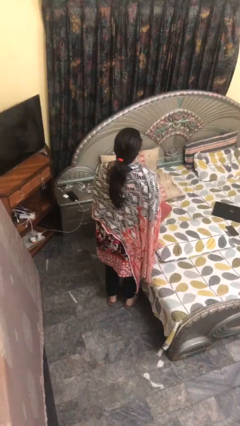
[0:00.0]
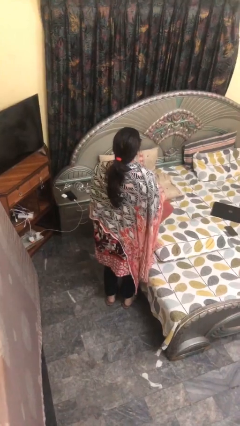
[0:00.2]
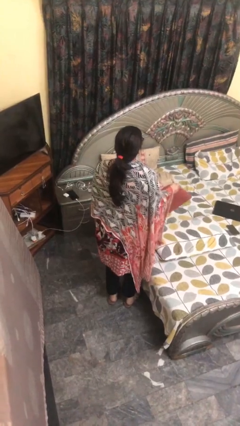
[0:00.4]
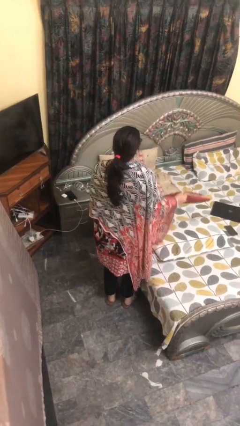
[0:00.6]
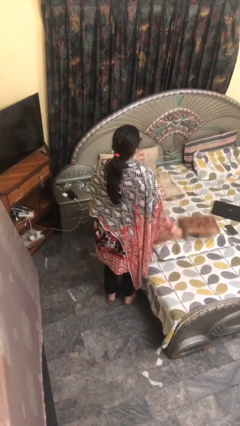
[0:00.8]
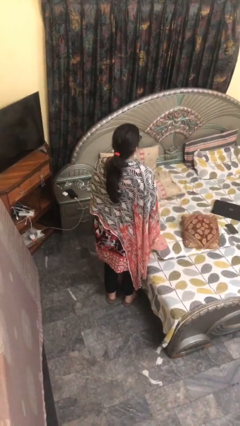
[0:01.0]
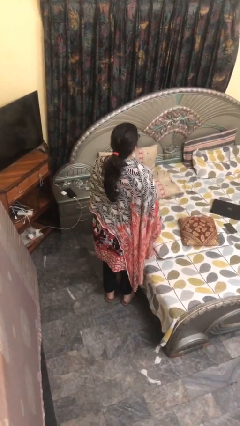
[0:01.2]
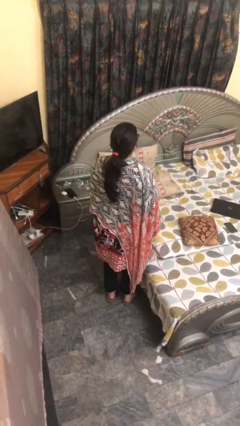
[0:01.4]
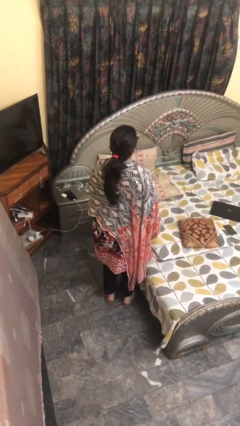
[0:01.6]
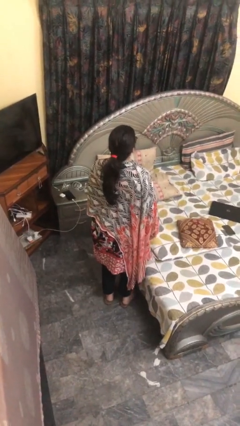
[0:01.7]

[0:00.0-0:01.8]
person throws object on bed

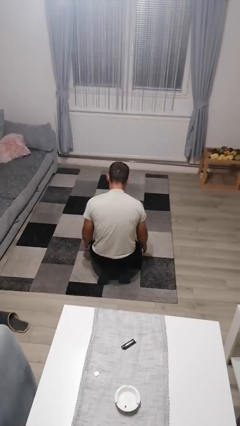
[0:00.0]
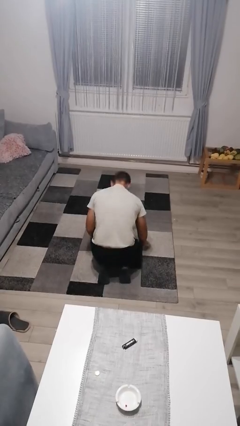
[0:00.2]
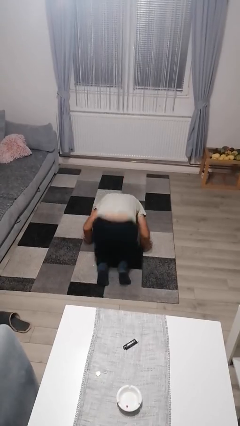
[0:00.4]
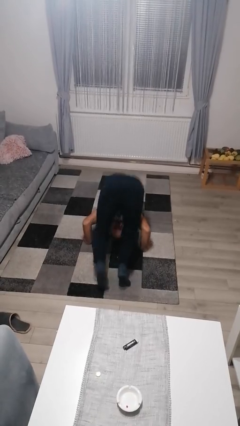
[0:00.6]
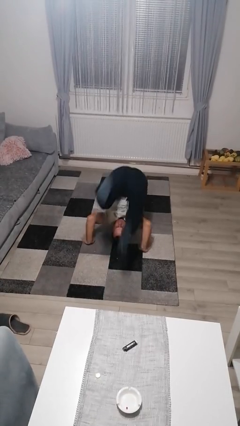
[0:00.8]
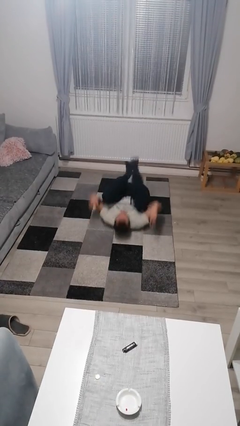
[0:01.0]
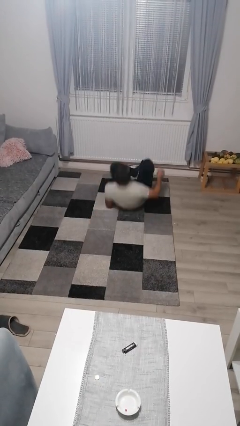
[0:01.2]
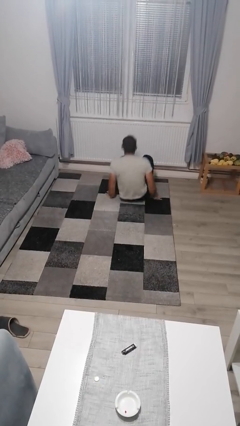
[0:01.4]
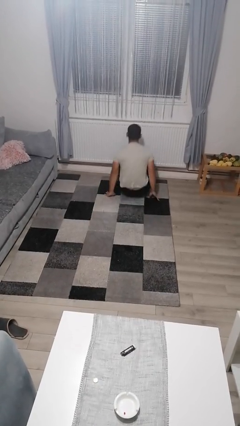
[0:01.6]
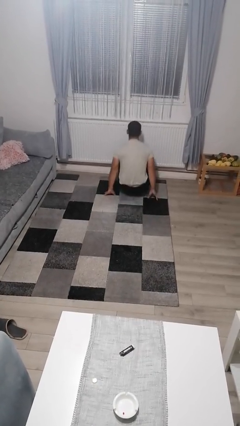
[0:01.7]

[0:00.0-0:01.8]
person somersaults

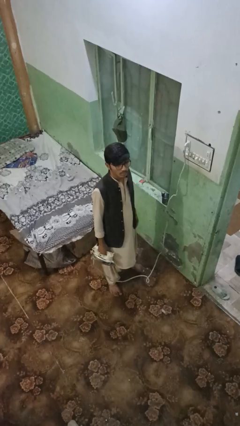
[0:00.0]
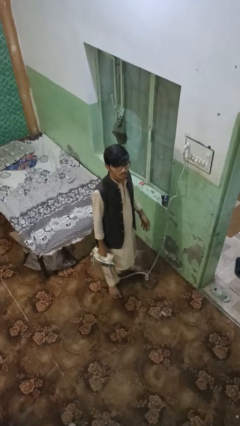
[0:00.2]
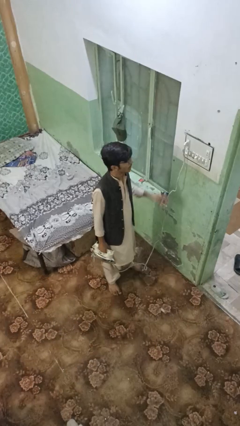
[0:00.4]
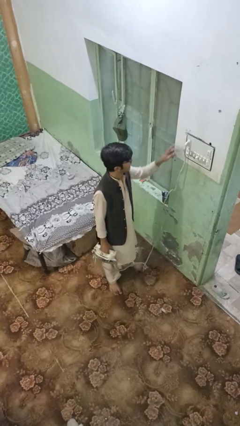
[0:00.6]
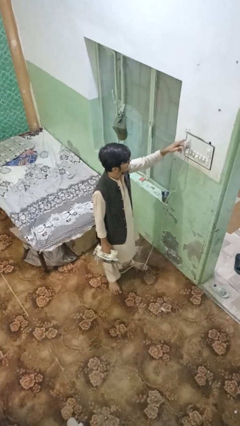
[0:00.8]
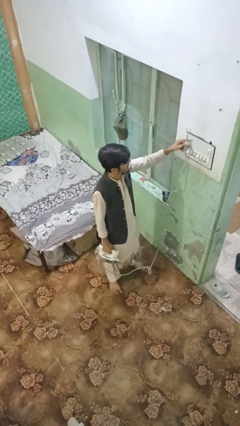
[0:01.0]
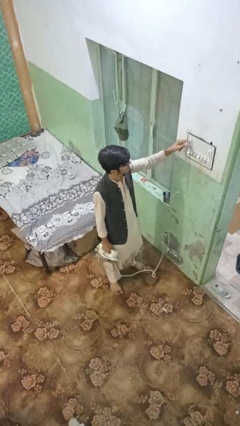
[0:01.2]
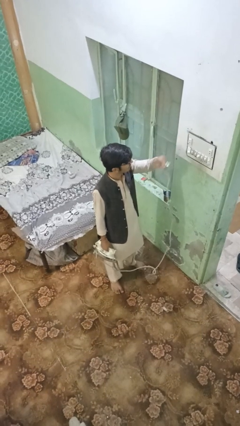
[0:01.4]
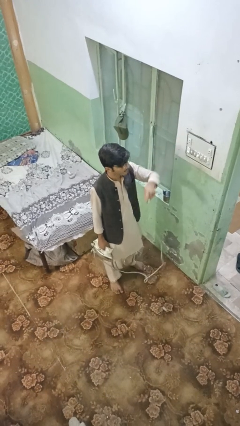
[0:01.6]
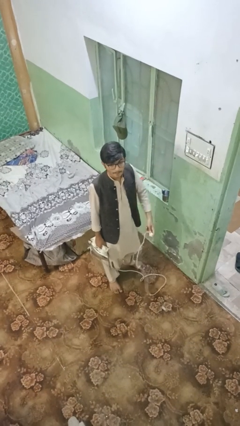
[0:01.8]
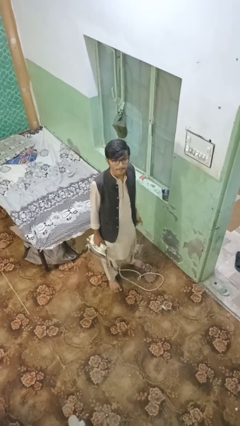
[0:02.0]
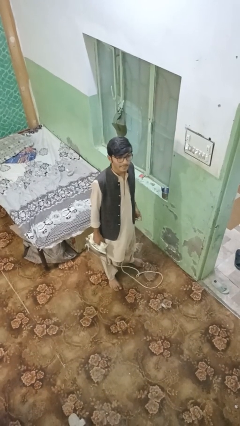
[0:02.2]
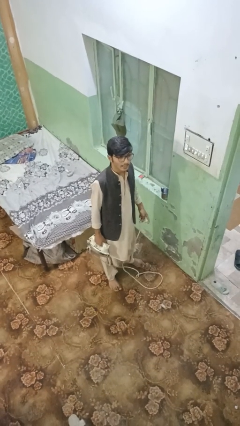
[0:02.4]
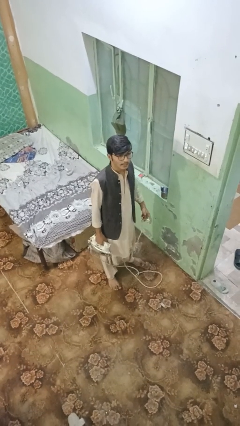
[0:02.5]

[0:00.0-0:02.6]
person unplugs from electrical socket

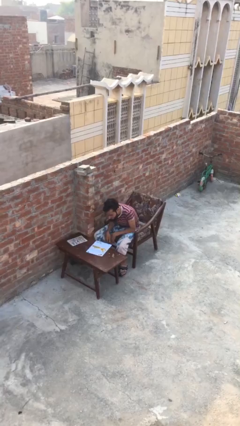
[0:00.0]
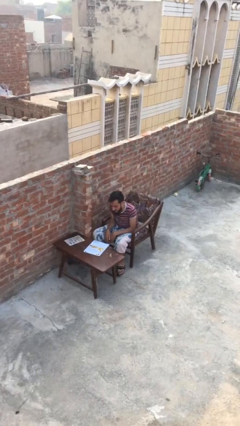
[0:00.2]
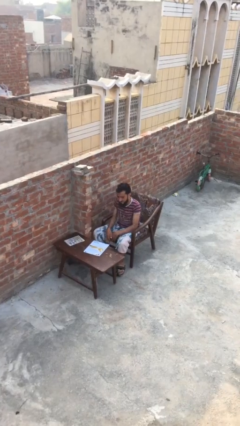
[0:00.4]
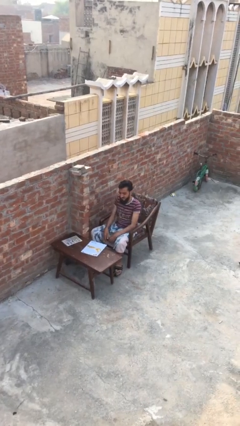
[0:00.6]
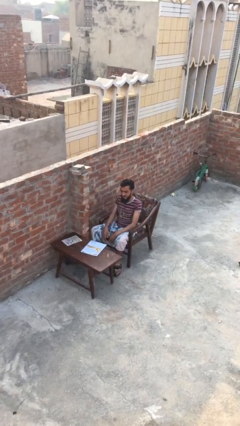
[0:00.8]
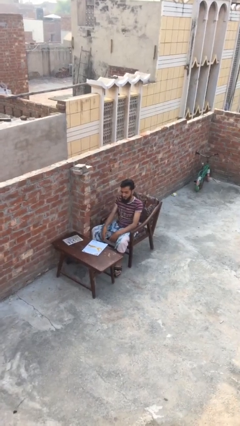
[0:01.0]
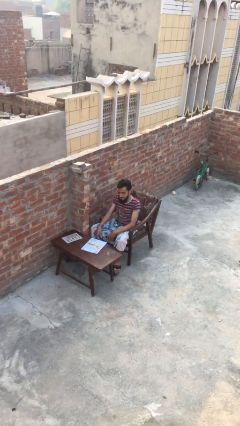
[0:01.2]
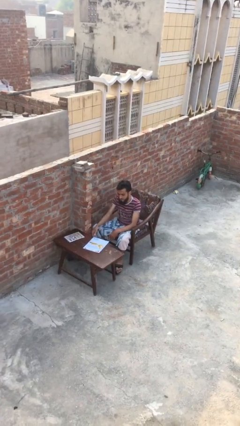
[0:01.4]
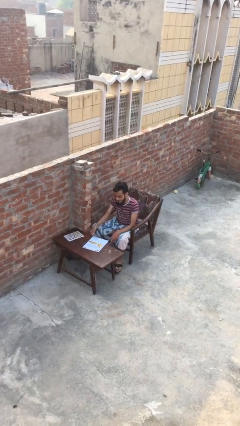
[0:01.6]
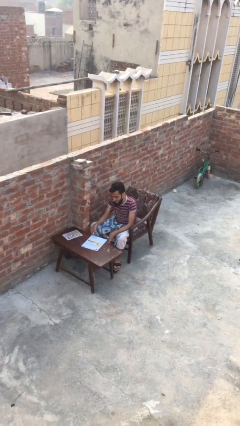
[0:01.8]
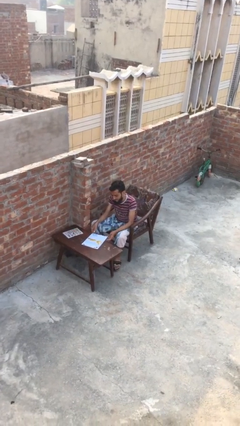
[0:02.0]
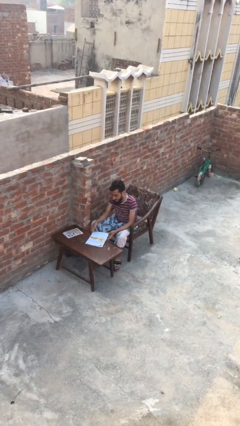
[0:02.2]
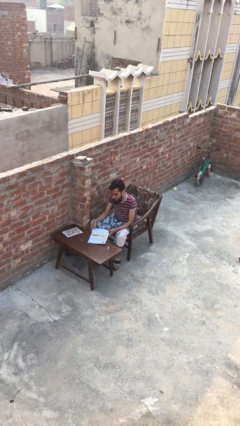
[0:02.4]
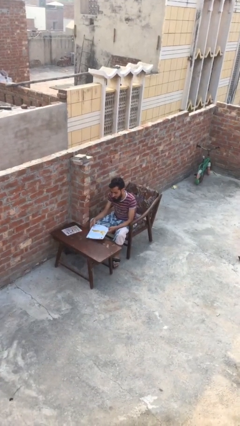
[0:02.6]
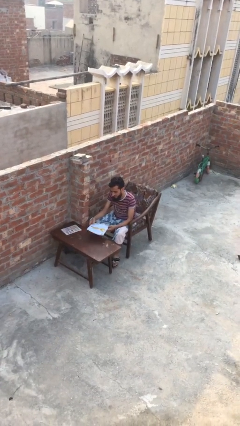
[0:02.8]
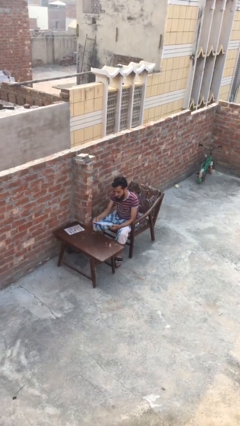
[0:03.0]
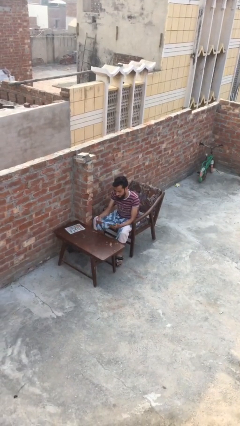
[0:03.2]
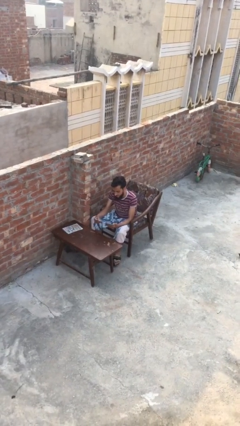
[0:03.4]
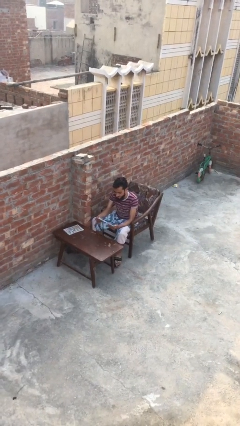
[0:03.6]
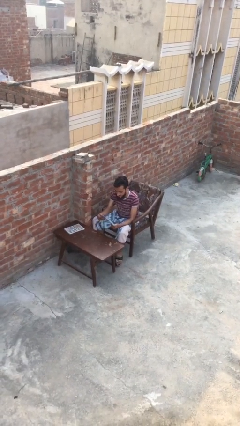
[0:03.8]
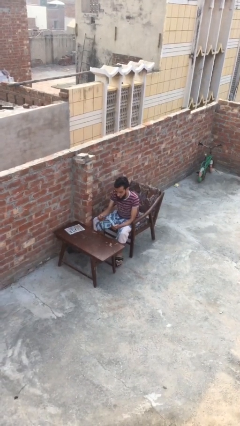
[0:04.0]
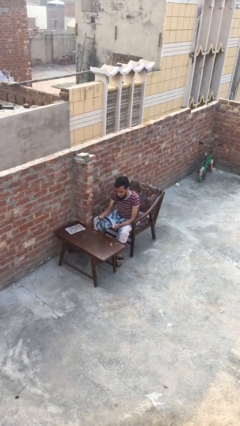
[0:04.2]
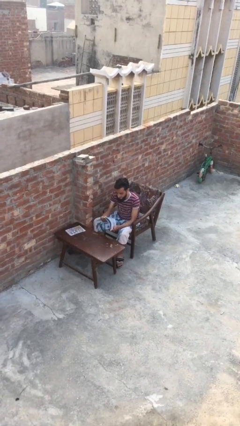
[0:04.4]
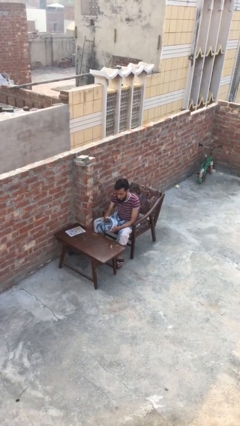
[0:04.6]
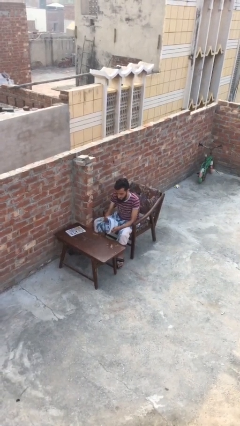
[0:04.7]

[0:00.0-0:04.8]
person reads document

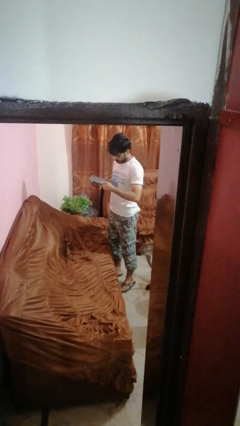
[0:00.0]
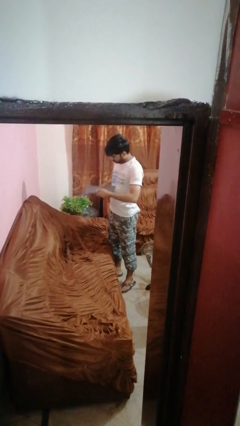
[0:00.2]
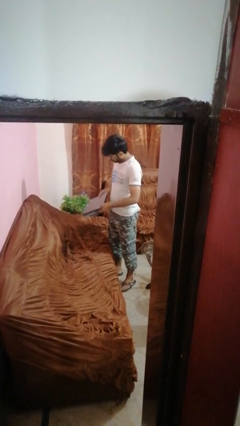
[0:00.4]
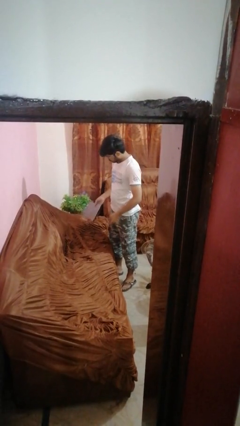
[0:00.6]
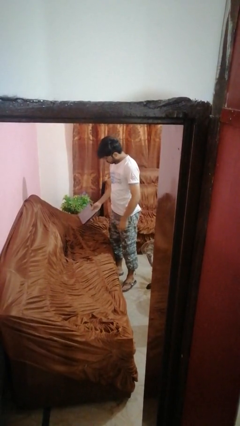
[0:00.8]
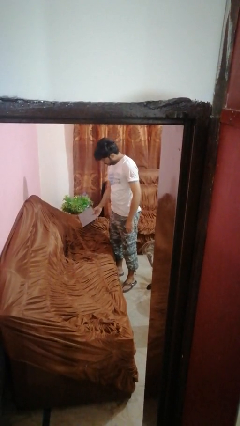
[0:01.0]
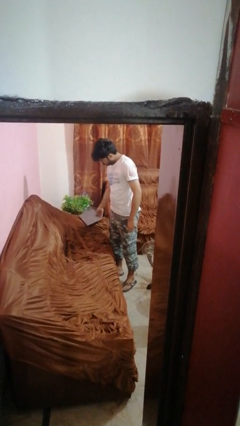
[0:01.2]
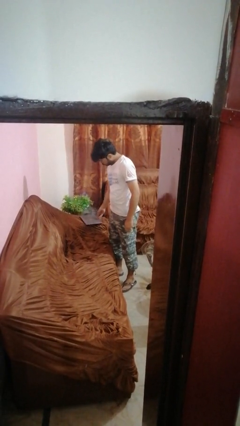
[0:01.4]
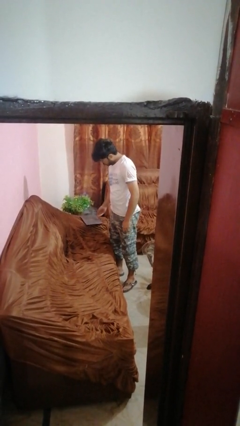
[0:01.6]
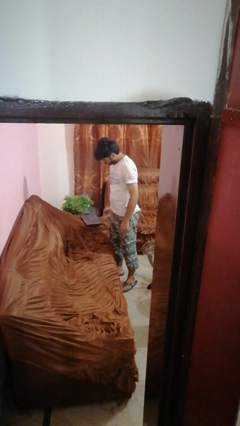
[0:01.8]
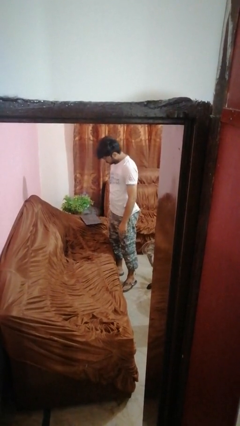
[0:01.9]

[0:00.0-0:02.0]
person puts down object on couch

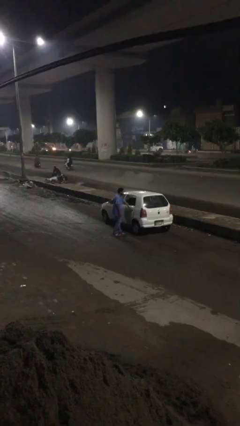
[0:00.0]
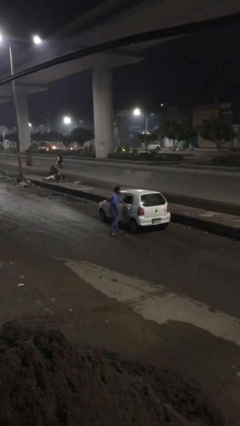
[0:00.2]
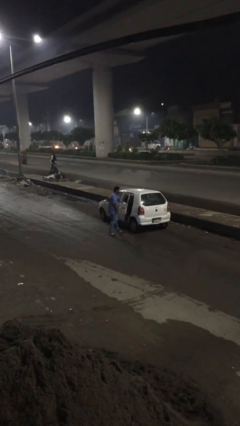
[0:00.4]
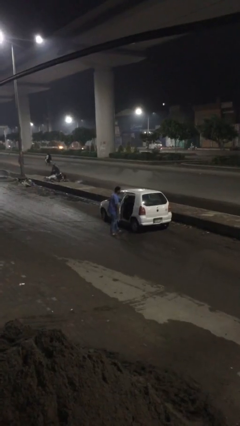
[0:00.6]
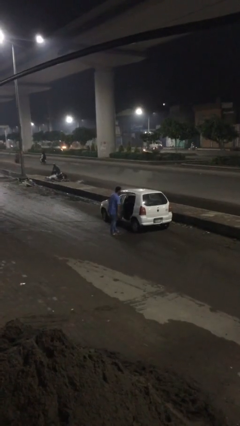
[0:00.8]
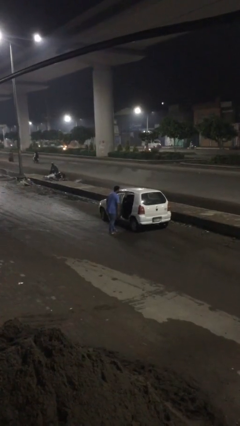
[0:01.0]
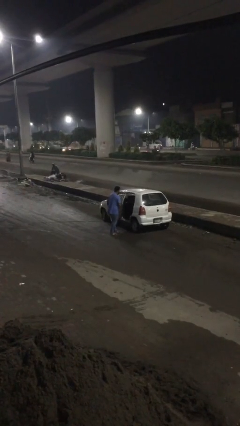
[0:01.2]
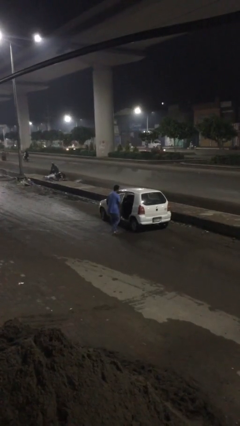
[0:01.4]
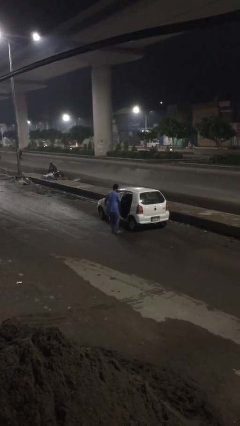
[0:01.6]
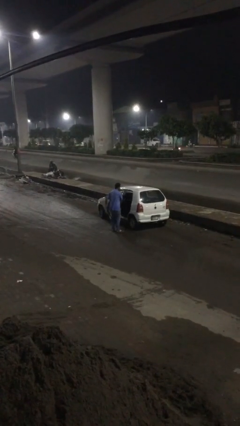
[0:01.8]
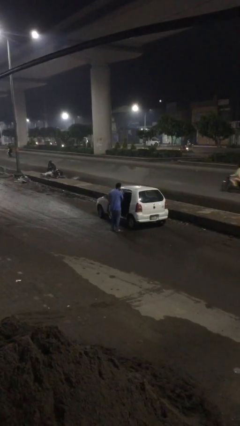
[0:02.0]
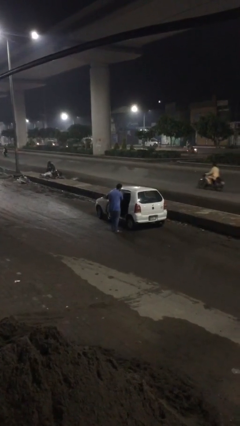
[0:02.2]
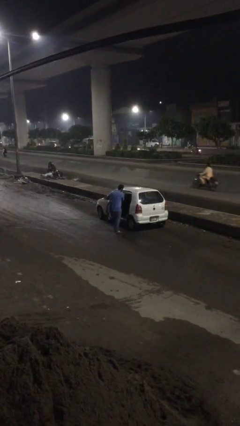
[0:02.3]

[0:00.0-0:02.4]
person opens car door

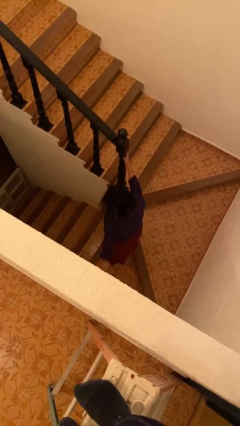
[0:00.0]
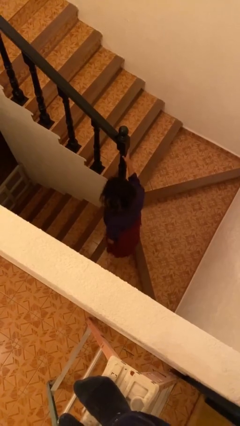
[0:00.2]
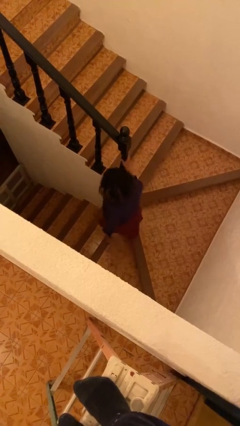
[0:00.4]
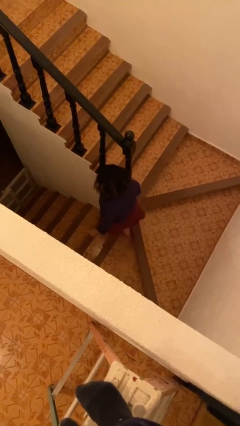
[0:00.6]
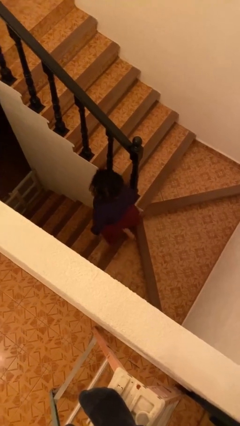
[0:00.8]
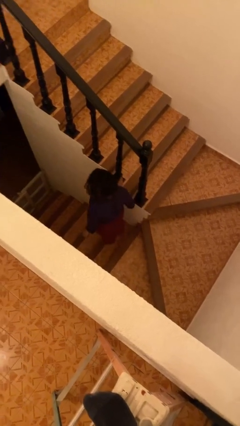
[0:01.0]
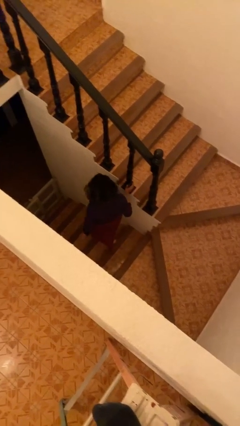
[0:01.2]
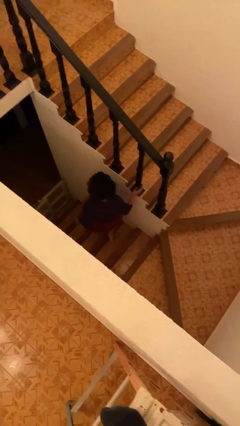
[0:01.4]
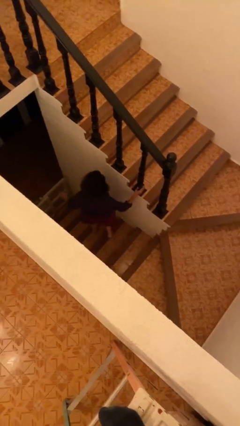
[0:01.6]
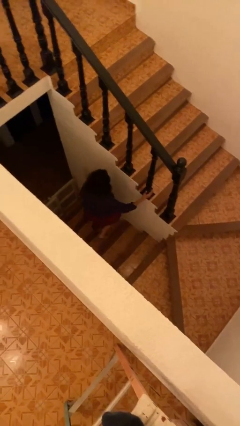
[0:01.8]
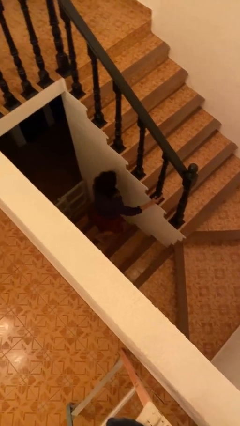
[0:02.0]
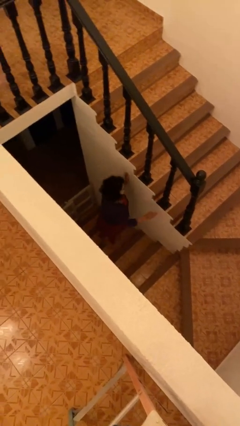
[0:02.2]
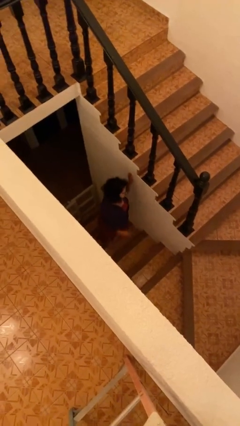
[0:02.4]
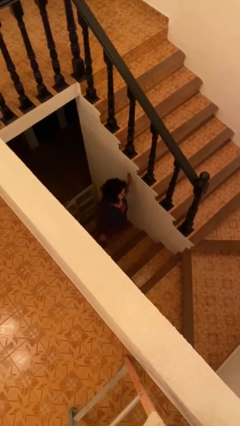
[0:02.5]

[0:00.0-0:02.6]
person climbs down stairs
